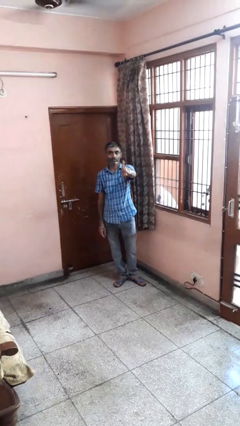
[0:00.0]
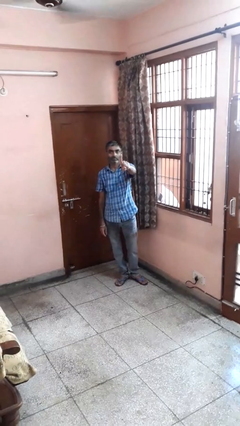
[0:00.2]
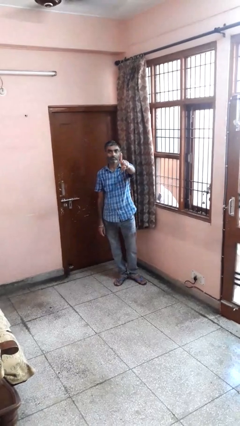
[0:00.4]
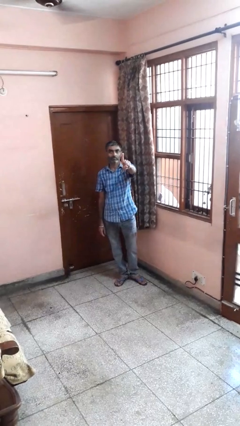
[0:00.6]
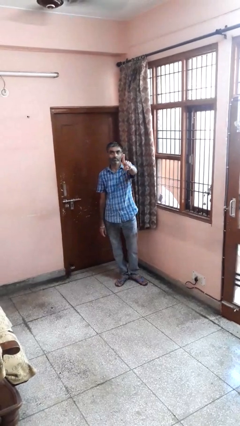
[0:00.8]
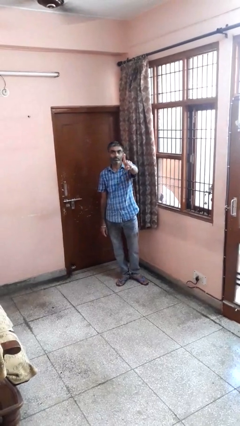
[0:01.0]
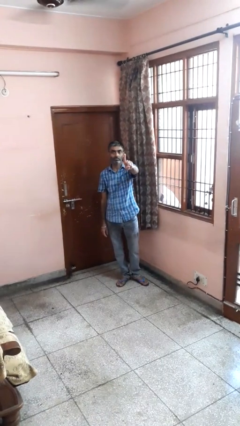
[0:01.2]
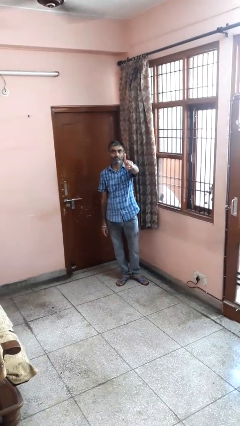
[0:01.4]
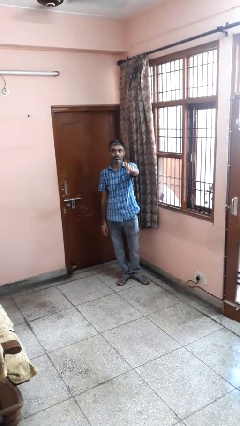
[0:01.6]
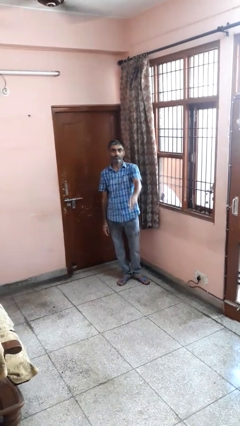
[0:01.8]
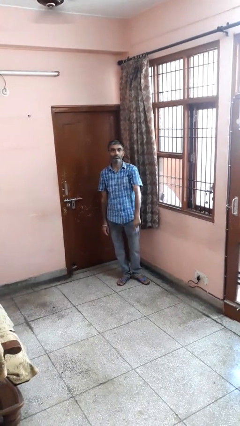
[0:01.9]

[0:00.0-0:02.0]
person gestures number one

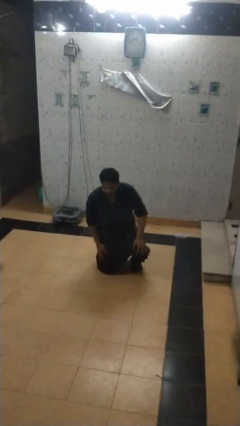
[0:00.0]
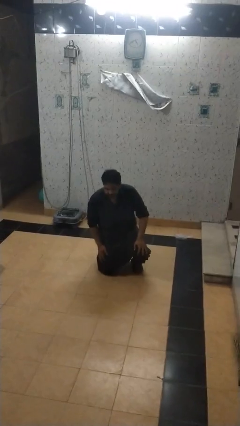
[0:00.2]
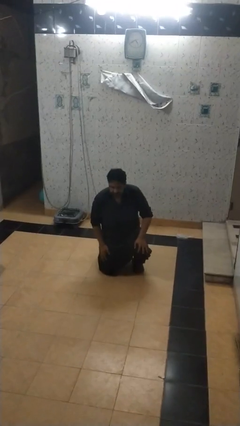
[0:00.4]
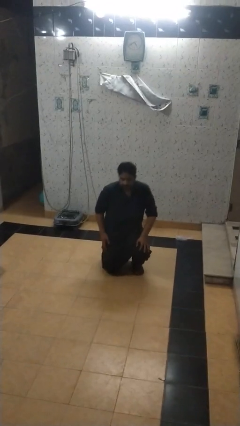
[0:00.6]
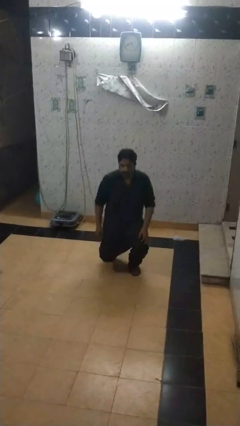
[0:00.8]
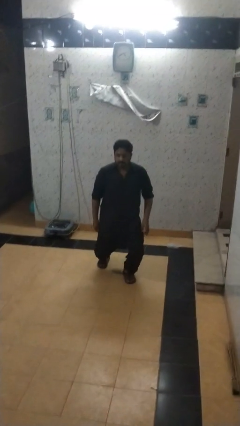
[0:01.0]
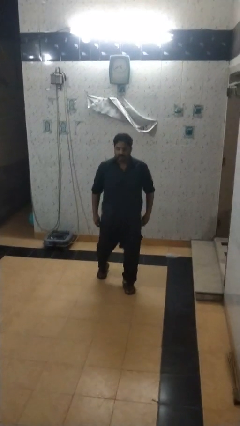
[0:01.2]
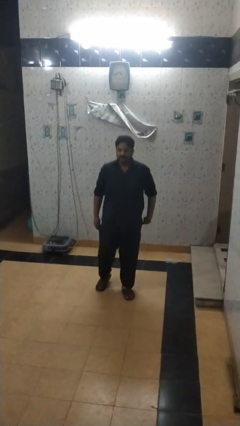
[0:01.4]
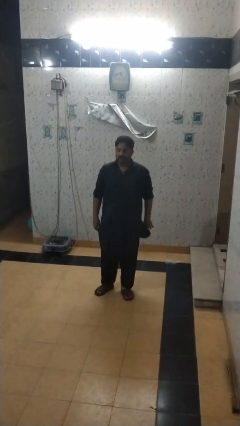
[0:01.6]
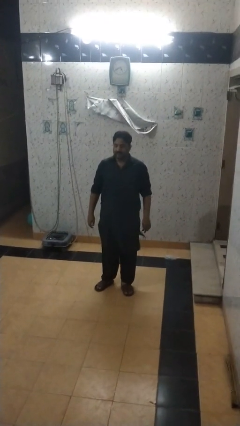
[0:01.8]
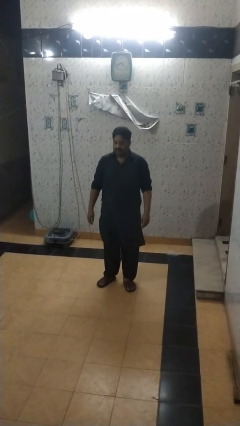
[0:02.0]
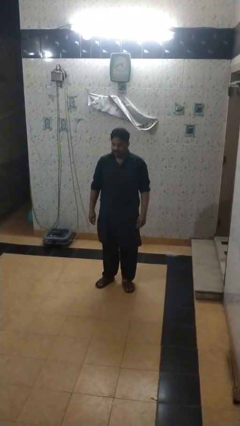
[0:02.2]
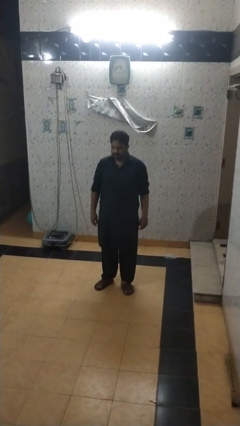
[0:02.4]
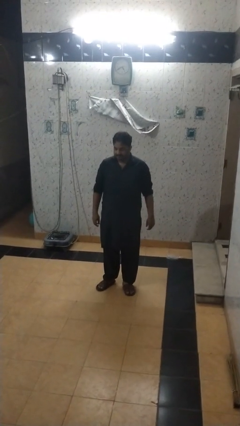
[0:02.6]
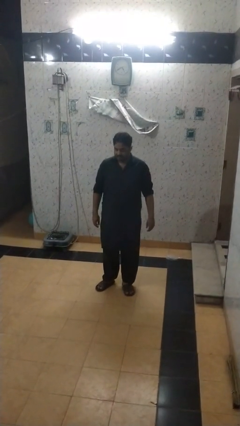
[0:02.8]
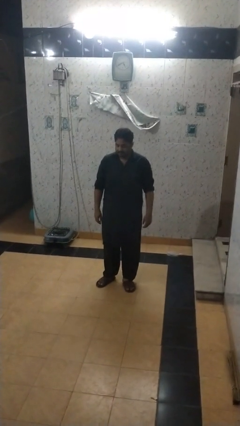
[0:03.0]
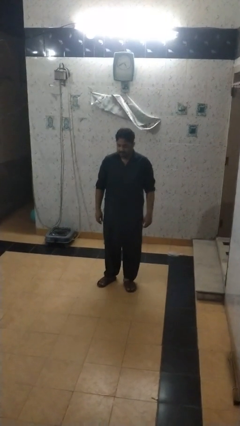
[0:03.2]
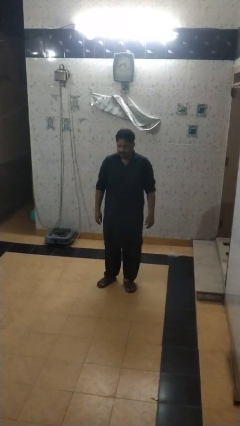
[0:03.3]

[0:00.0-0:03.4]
person stands up from floor

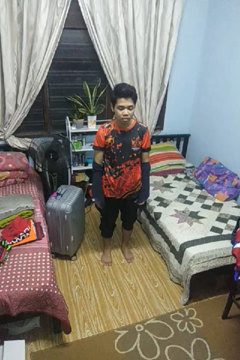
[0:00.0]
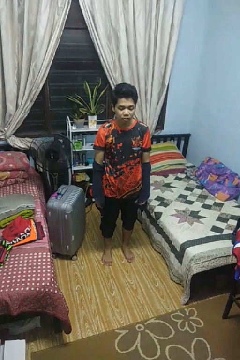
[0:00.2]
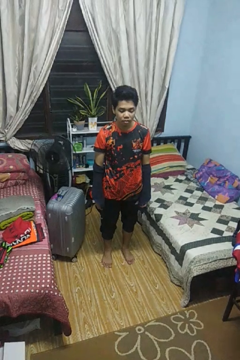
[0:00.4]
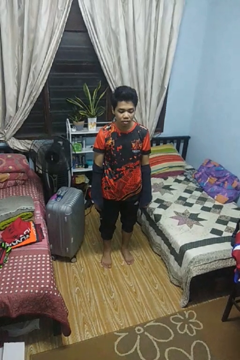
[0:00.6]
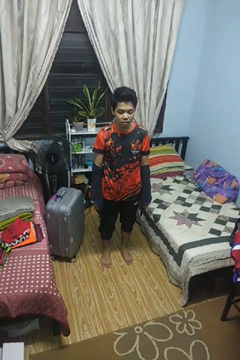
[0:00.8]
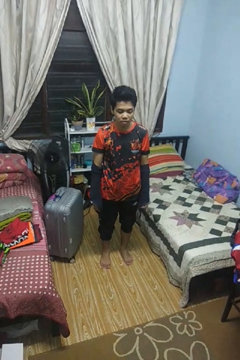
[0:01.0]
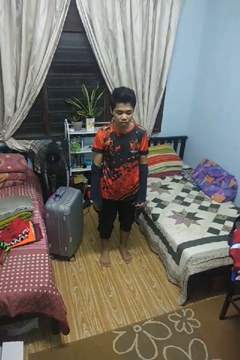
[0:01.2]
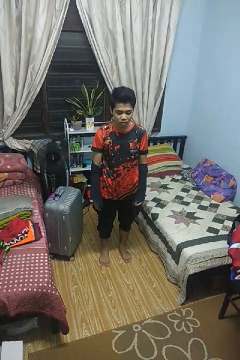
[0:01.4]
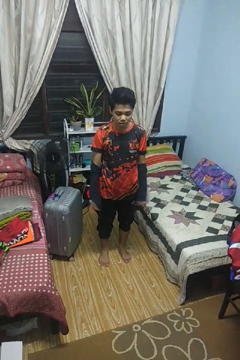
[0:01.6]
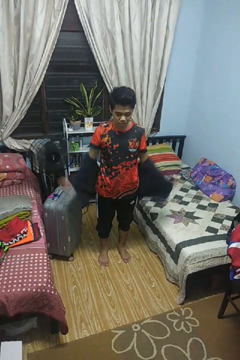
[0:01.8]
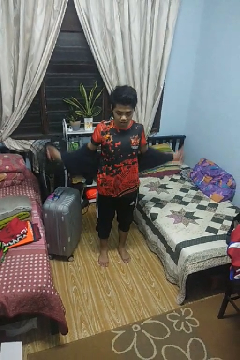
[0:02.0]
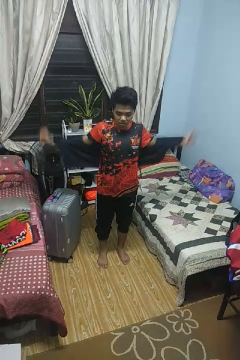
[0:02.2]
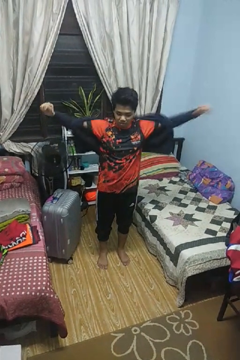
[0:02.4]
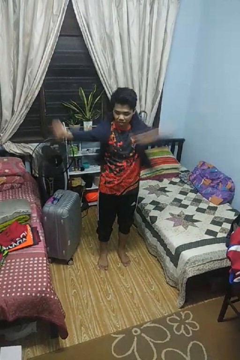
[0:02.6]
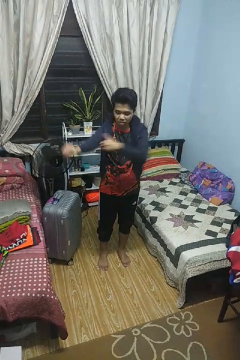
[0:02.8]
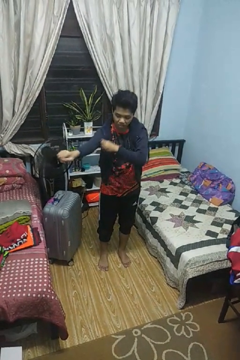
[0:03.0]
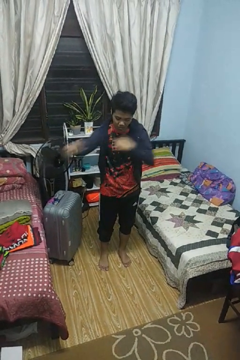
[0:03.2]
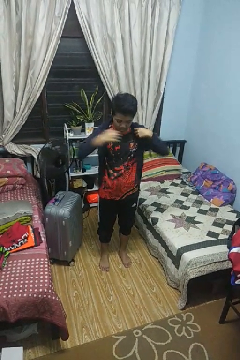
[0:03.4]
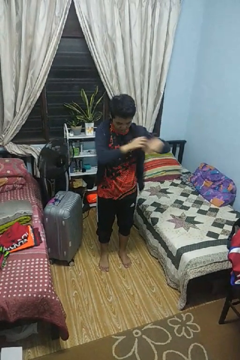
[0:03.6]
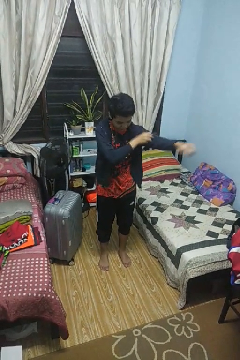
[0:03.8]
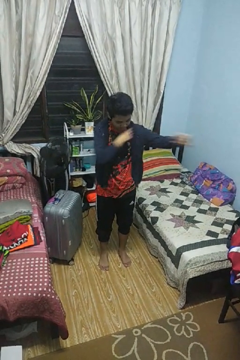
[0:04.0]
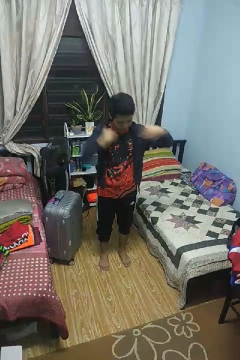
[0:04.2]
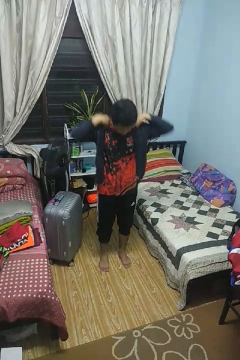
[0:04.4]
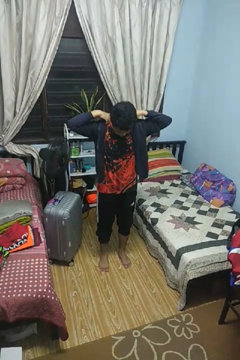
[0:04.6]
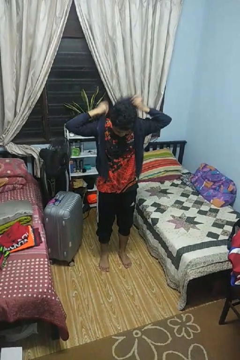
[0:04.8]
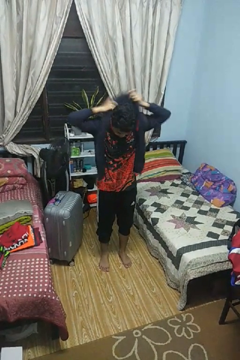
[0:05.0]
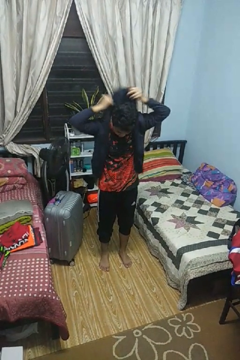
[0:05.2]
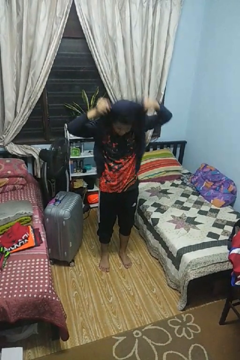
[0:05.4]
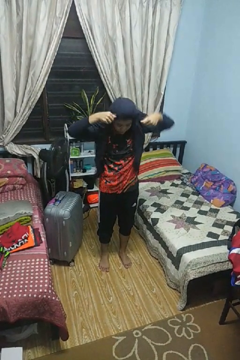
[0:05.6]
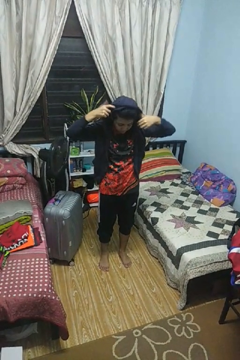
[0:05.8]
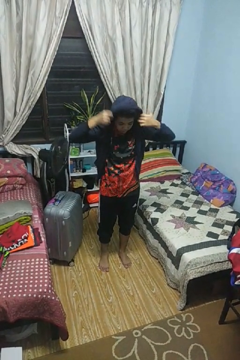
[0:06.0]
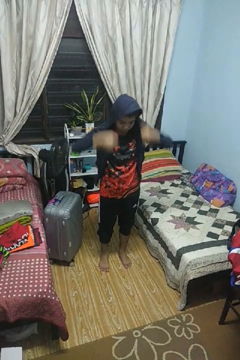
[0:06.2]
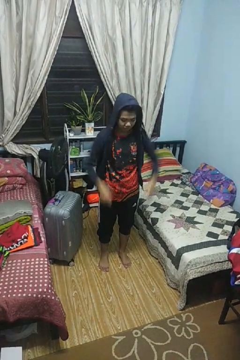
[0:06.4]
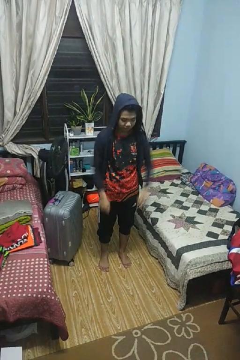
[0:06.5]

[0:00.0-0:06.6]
person puts on hoodie

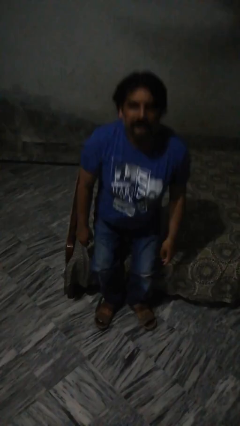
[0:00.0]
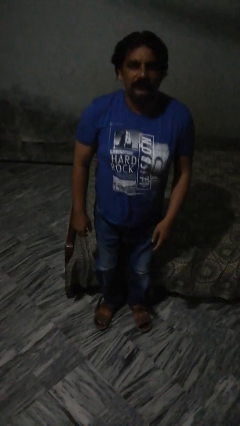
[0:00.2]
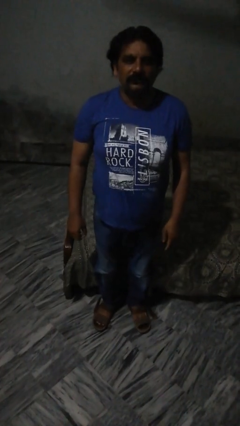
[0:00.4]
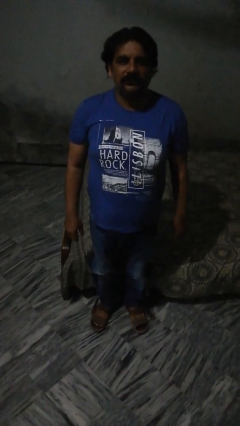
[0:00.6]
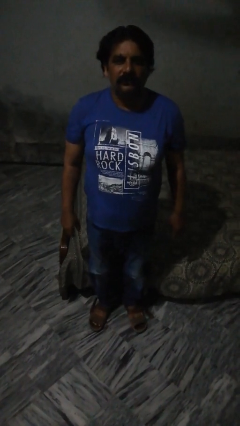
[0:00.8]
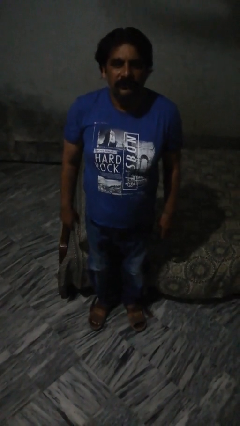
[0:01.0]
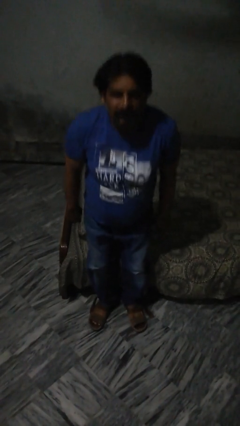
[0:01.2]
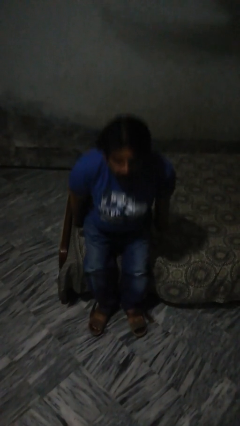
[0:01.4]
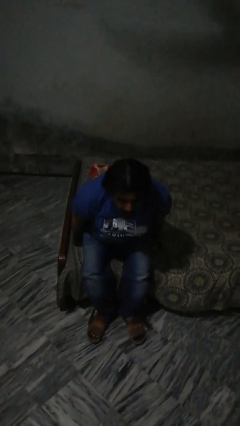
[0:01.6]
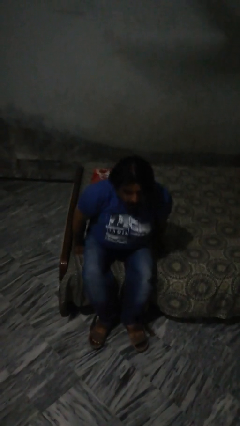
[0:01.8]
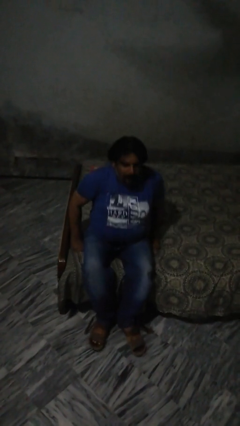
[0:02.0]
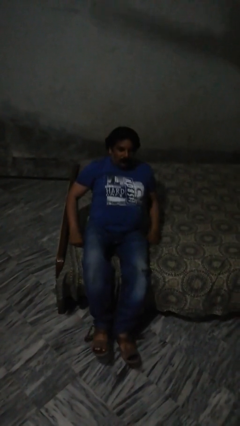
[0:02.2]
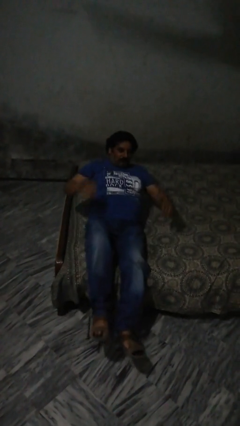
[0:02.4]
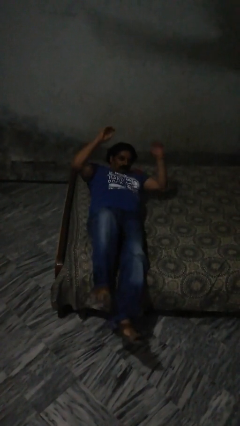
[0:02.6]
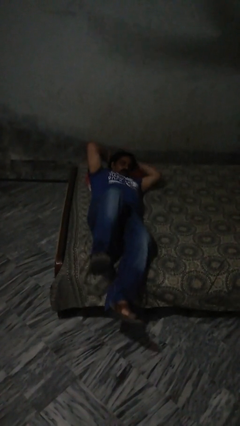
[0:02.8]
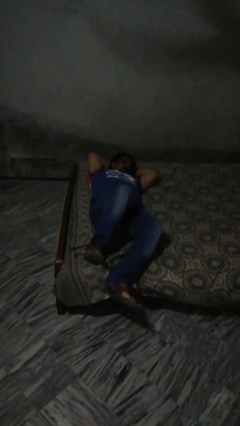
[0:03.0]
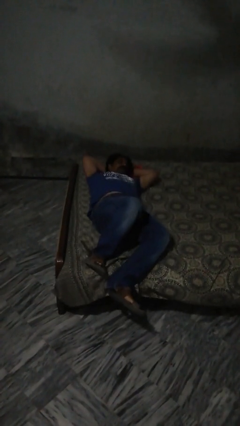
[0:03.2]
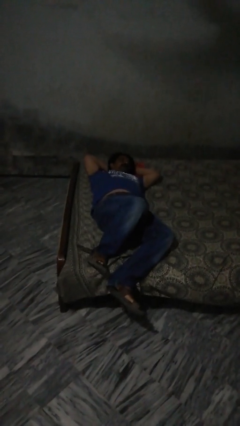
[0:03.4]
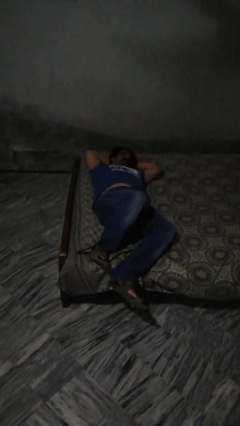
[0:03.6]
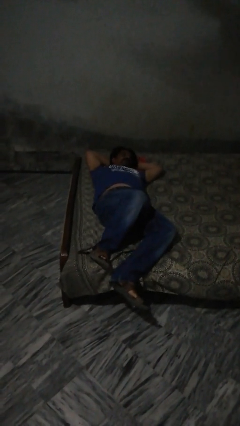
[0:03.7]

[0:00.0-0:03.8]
person lies down on bed

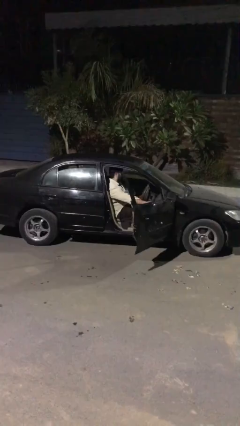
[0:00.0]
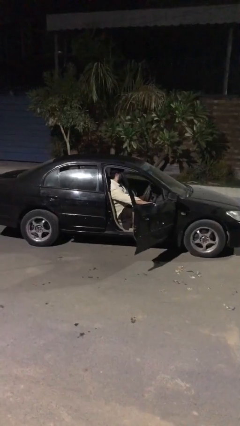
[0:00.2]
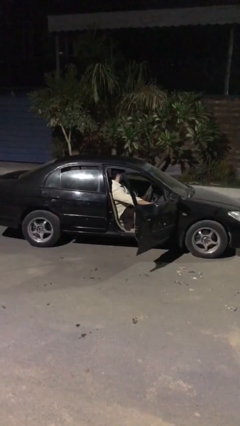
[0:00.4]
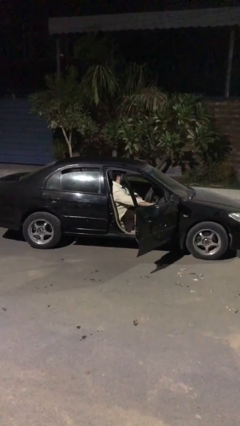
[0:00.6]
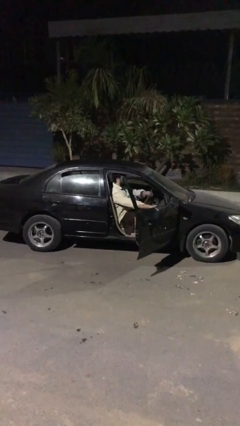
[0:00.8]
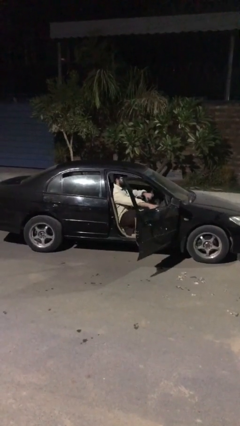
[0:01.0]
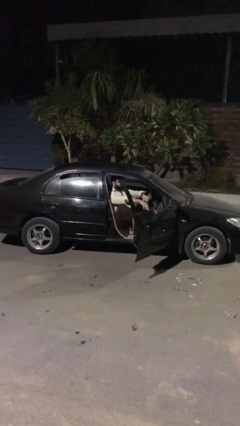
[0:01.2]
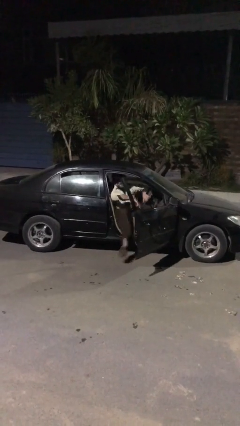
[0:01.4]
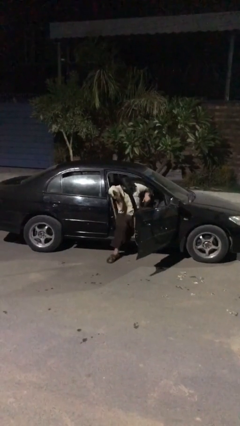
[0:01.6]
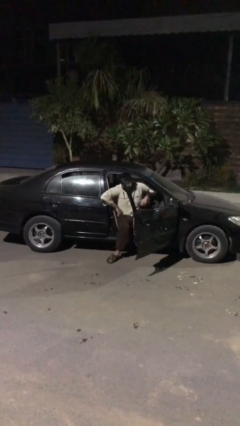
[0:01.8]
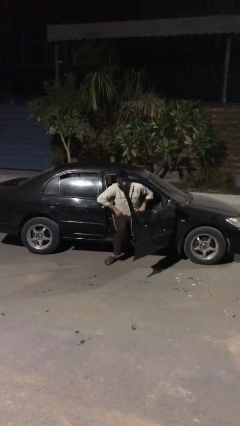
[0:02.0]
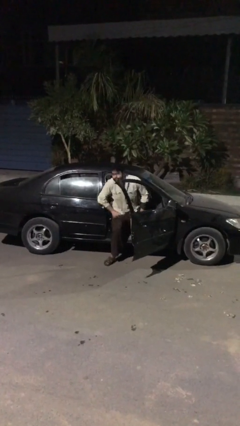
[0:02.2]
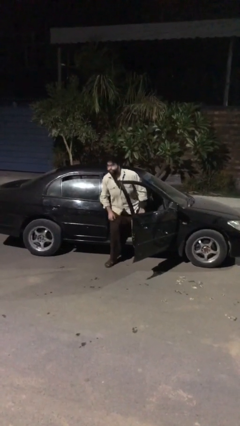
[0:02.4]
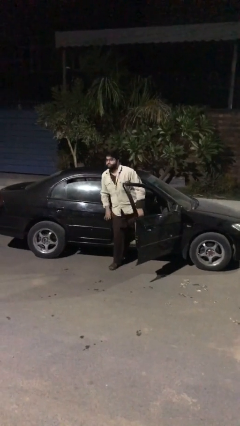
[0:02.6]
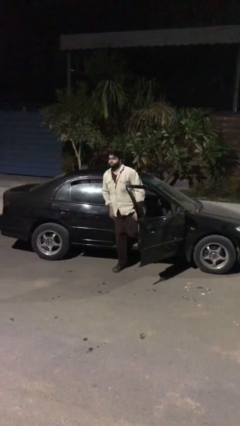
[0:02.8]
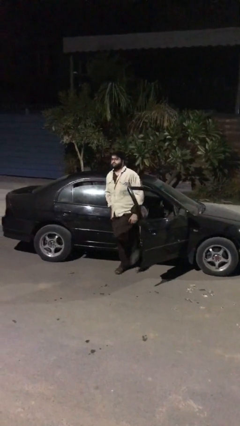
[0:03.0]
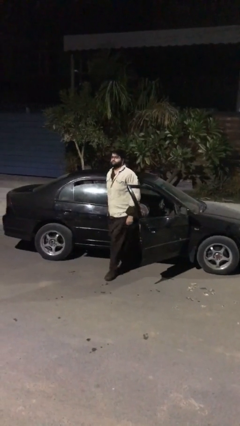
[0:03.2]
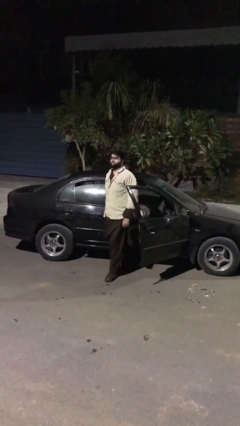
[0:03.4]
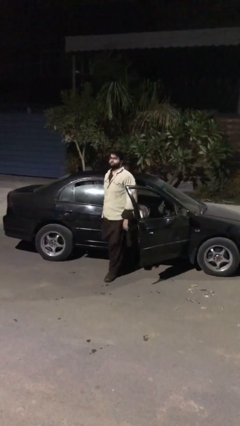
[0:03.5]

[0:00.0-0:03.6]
person exits car
